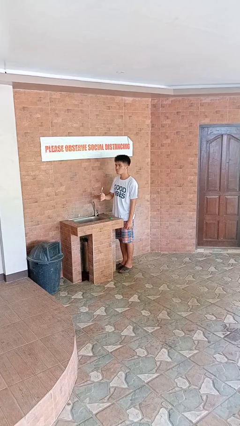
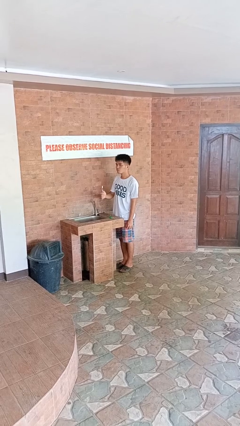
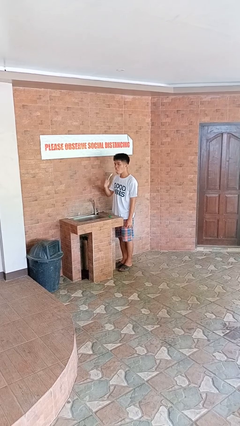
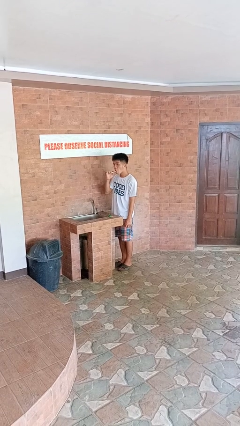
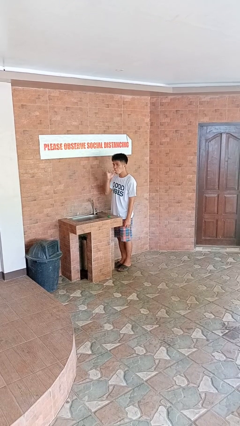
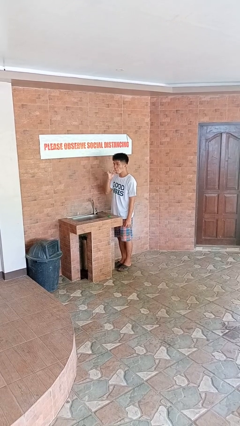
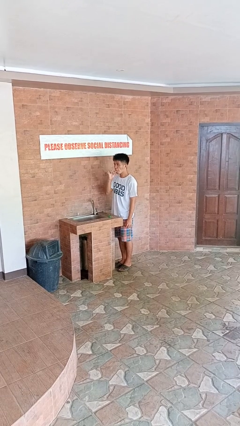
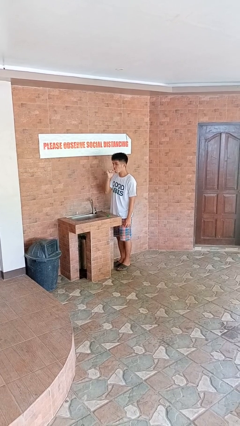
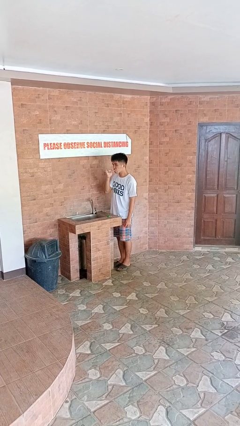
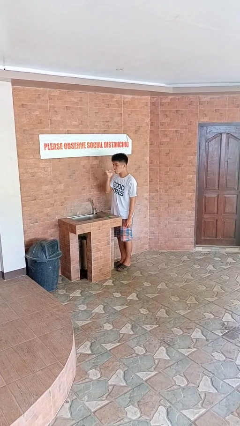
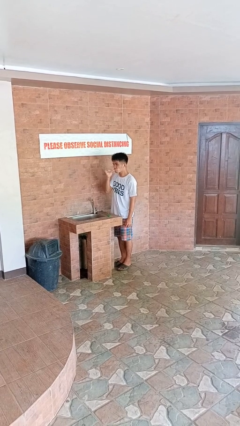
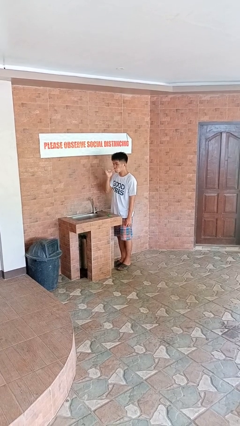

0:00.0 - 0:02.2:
person brushes teeth

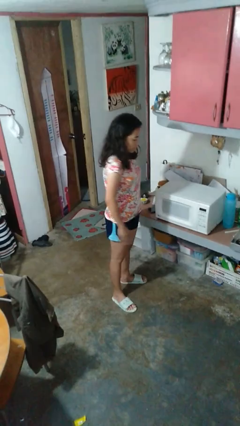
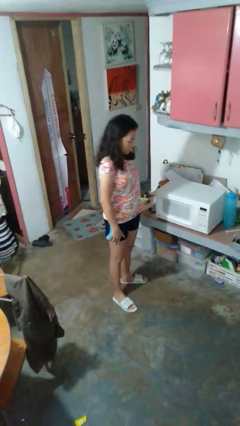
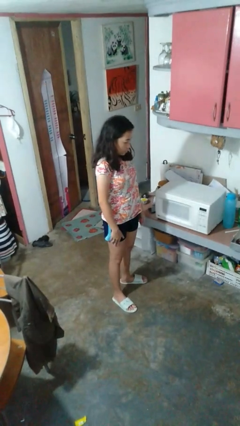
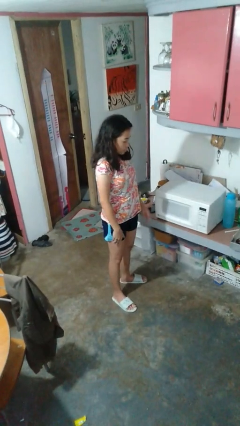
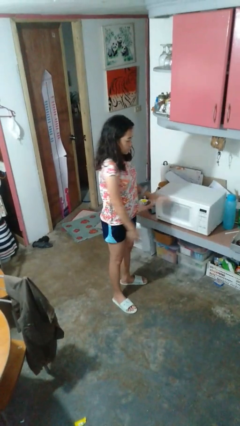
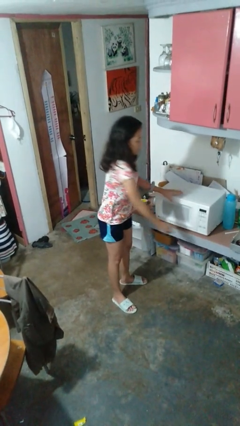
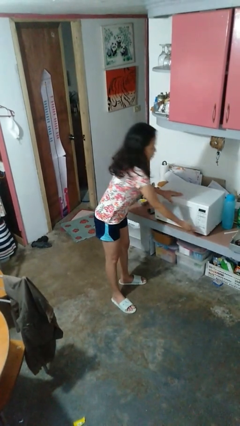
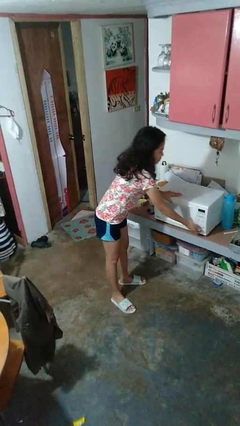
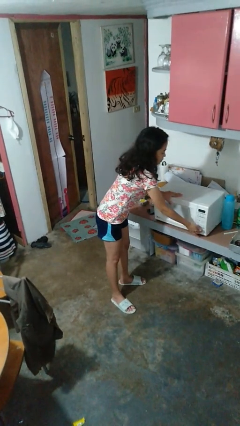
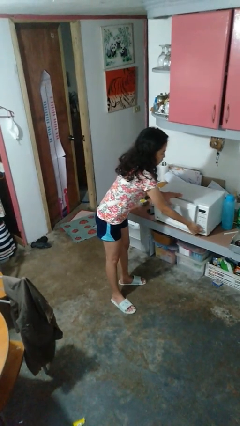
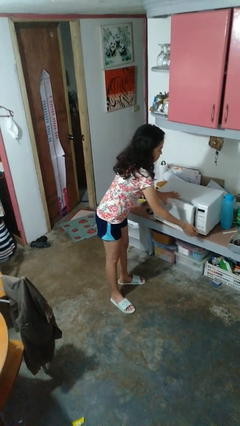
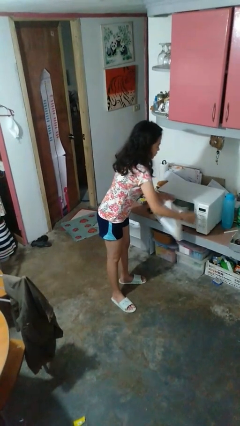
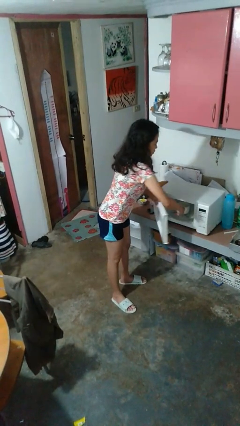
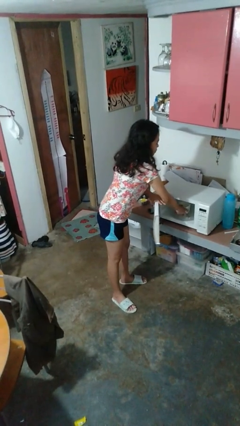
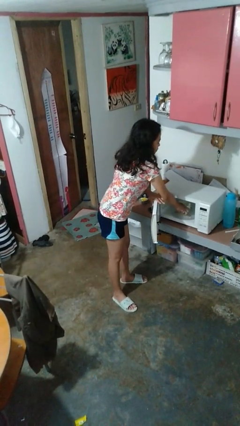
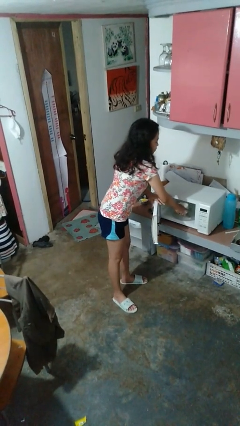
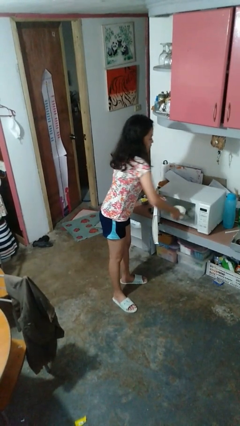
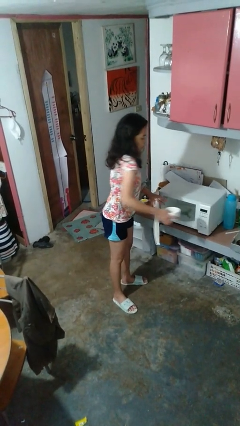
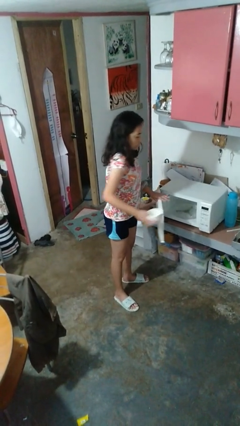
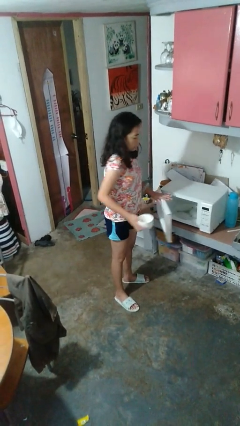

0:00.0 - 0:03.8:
person takes object from microwave

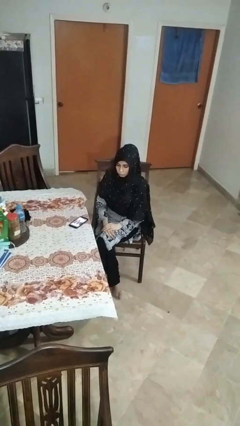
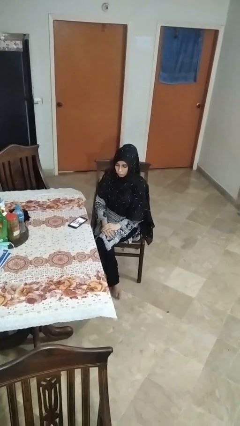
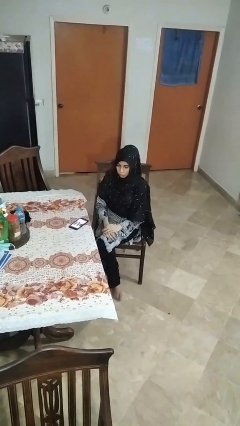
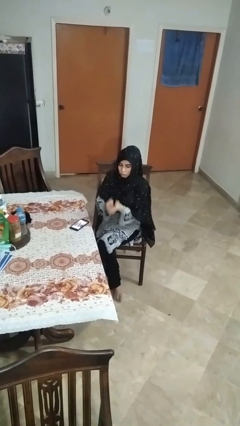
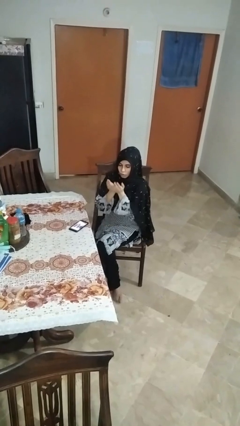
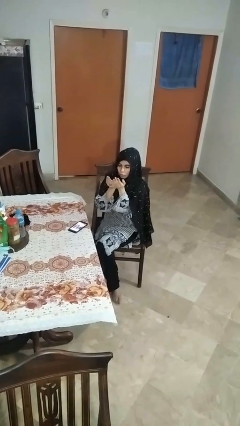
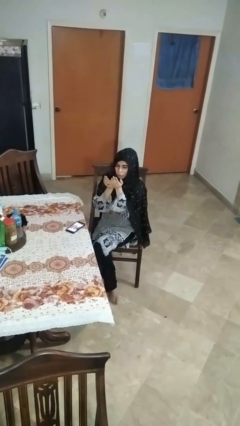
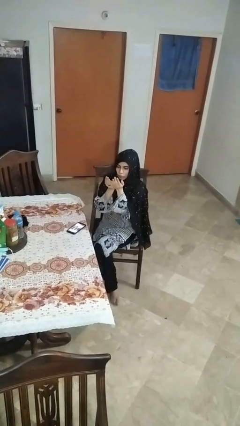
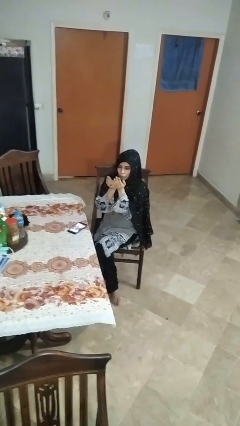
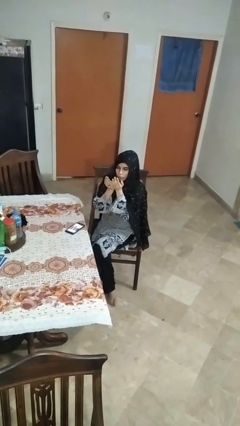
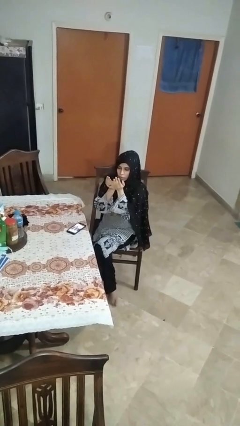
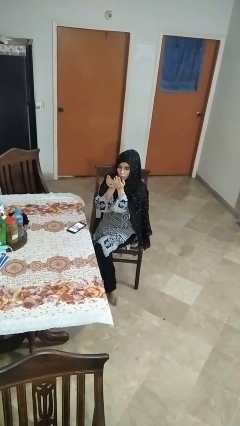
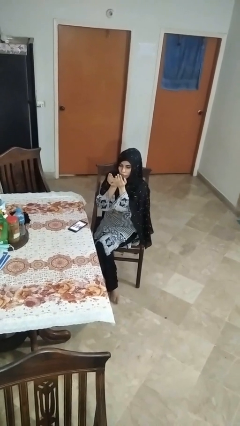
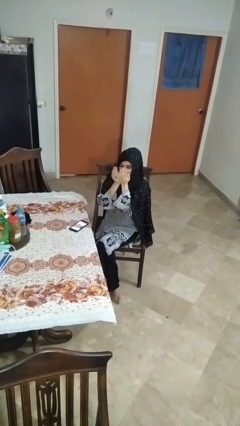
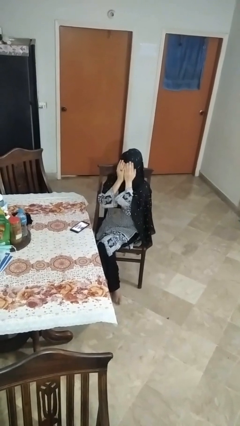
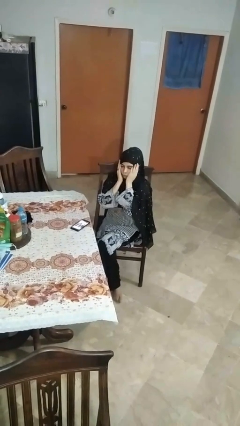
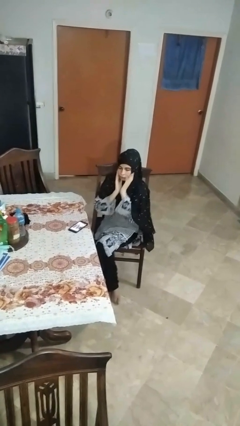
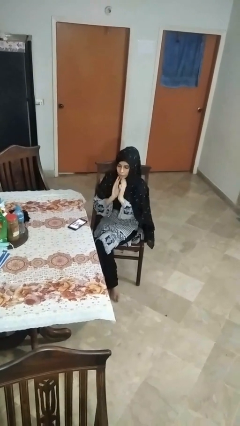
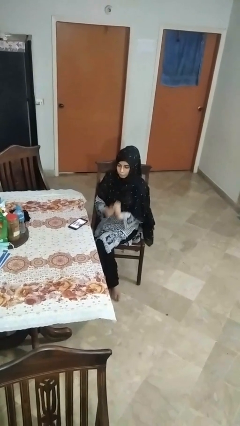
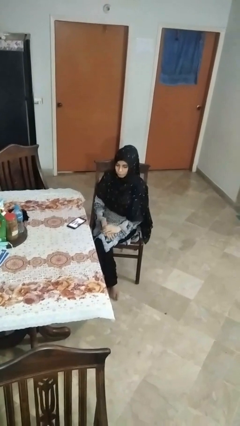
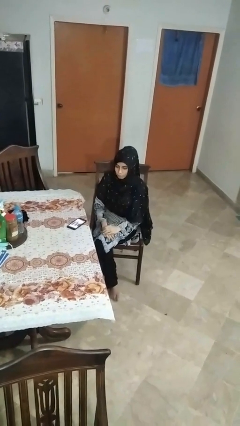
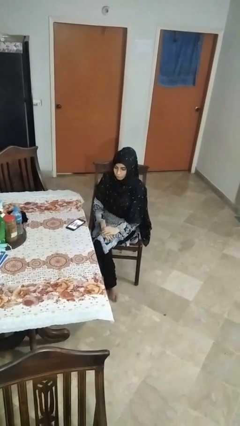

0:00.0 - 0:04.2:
person prays

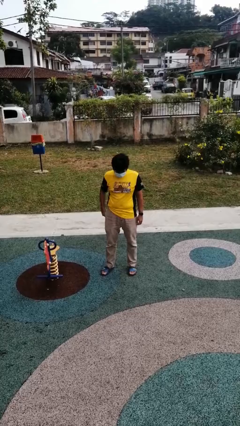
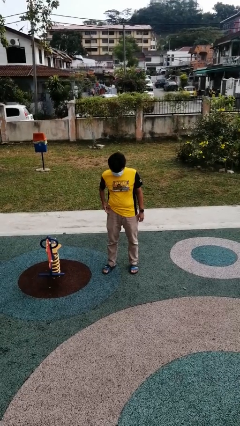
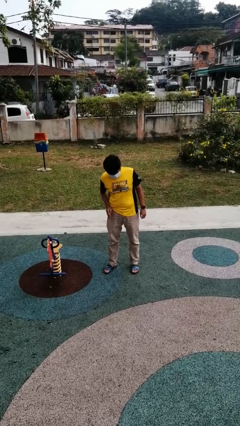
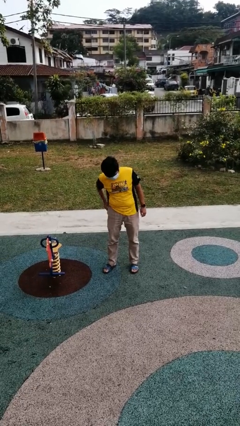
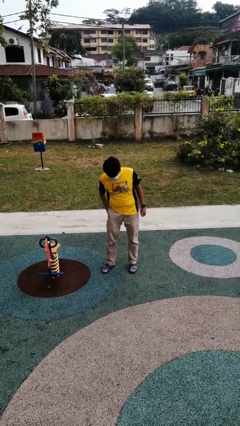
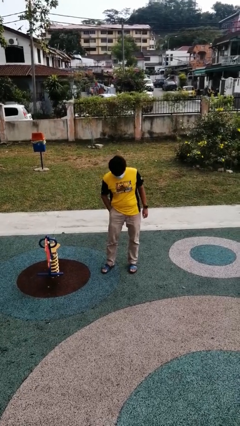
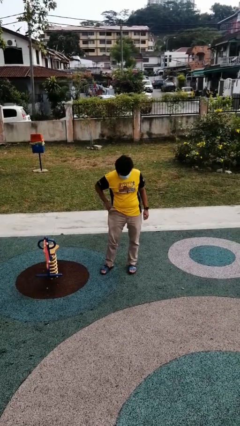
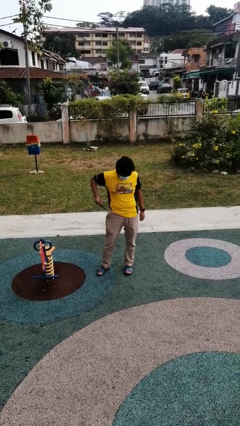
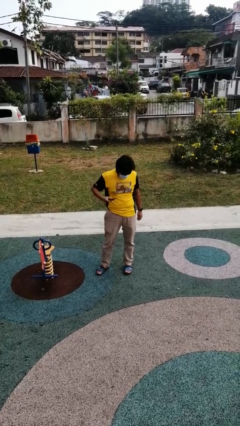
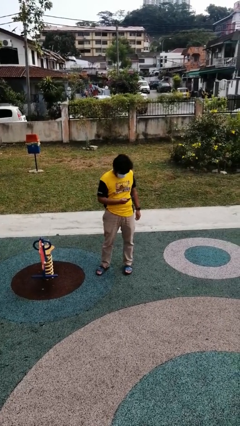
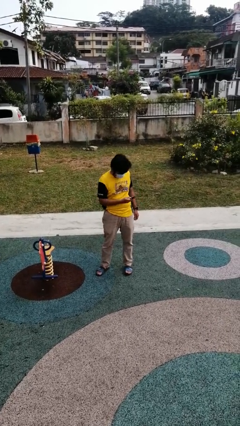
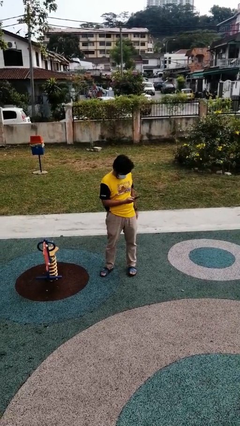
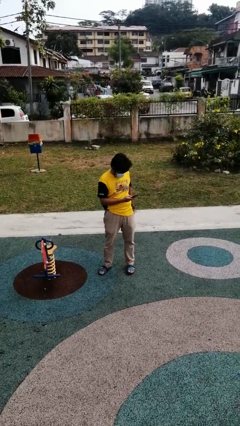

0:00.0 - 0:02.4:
person takes phone from pocket

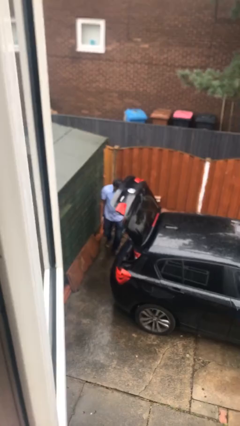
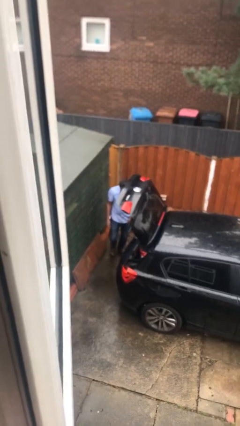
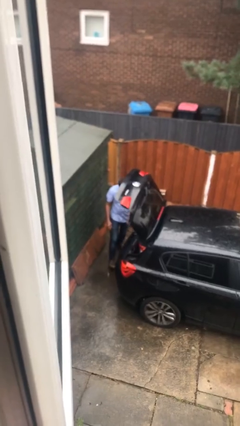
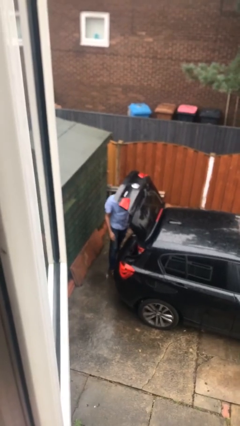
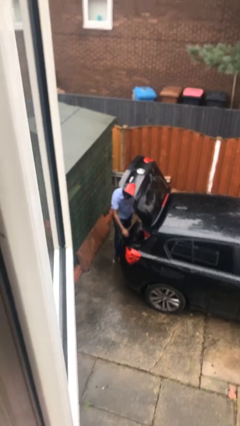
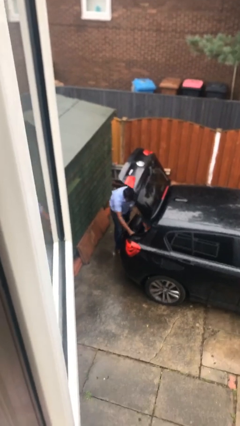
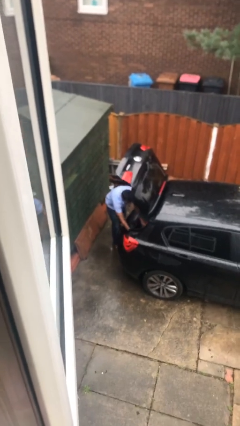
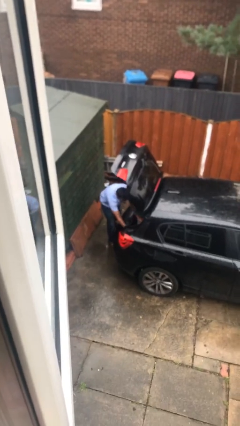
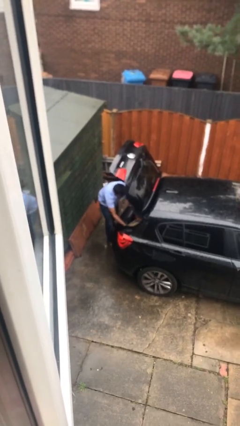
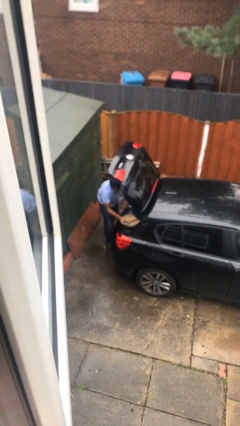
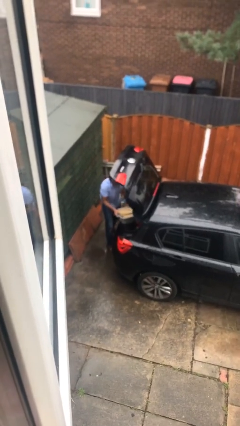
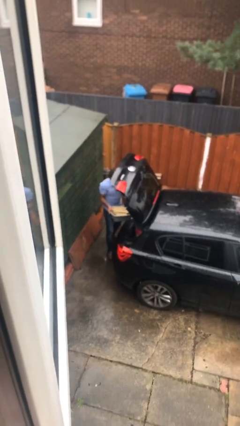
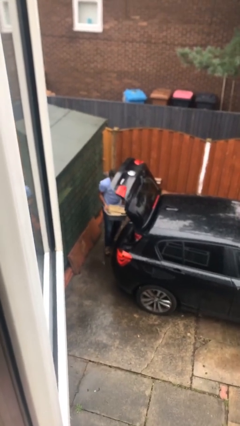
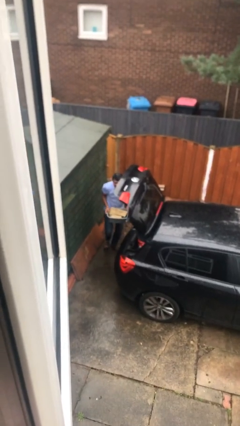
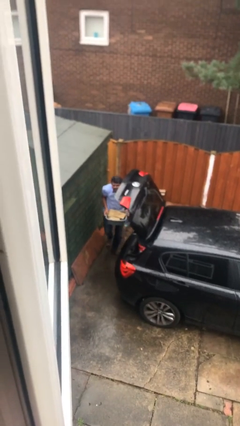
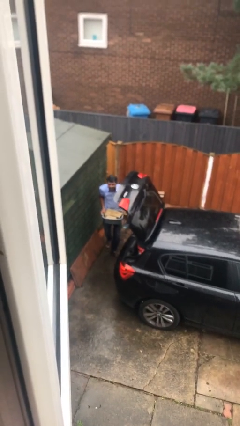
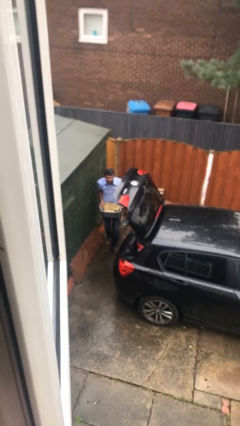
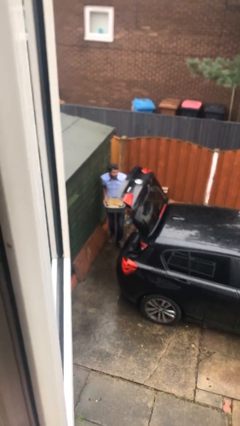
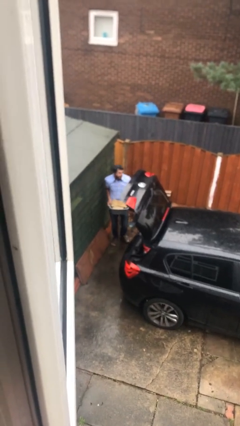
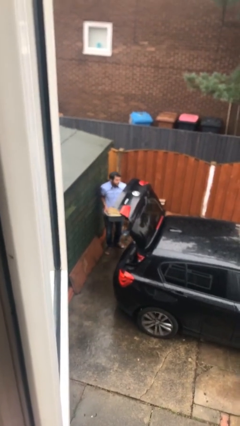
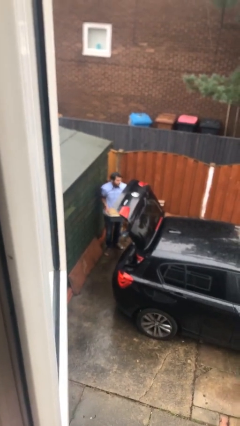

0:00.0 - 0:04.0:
person unloads car

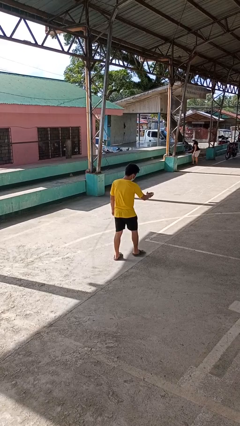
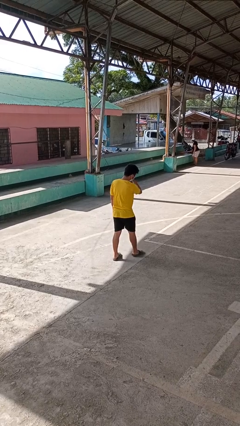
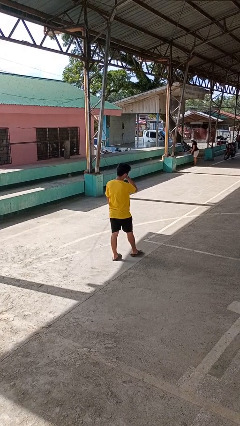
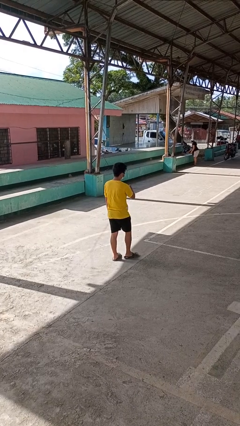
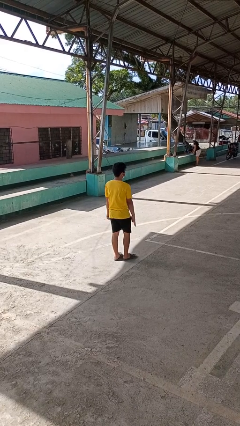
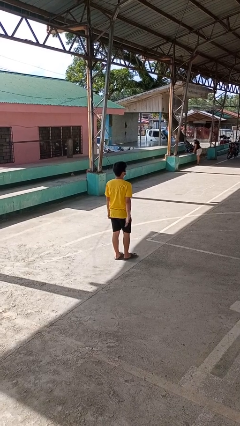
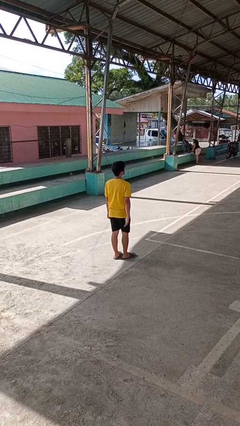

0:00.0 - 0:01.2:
person karate chop
